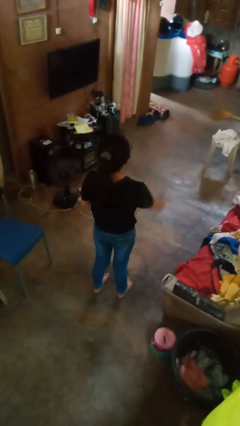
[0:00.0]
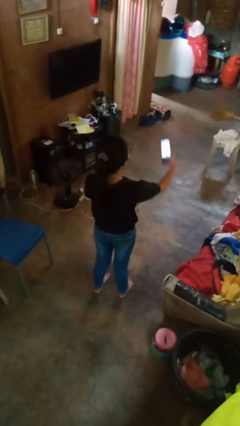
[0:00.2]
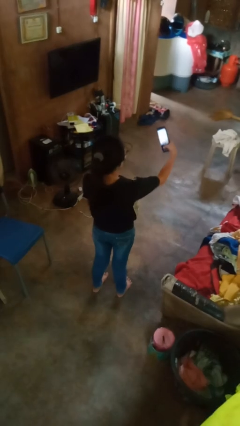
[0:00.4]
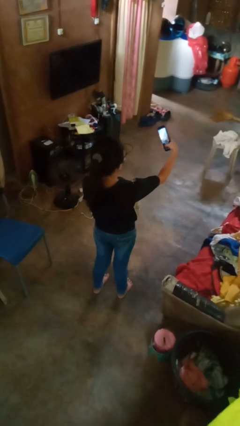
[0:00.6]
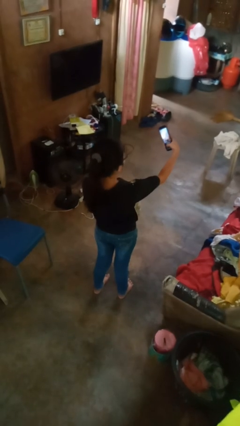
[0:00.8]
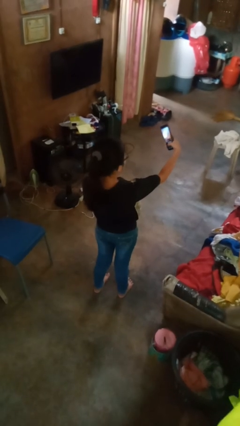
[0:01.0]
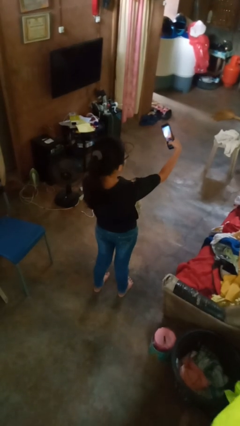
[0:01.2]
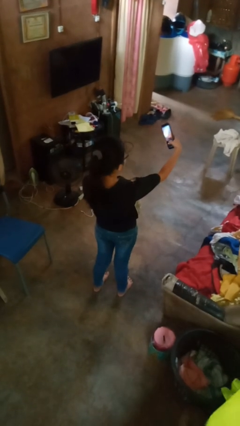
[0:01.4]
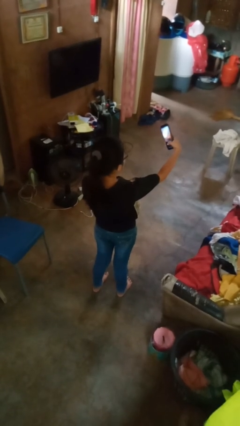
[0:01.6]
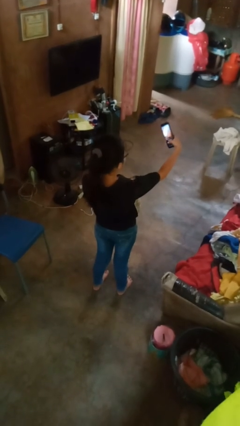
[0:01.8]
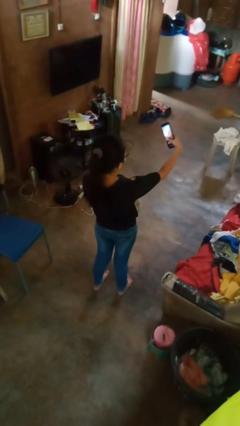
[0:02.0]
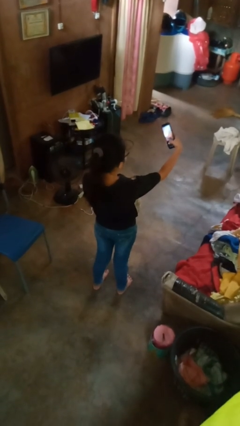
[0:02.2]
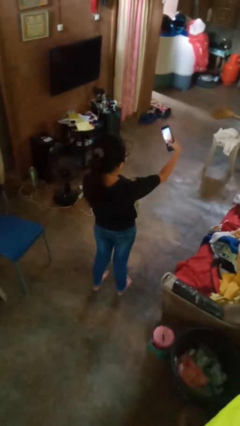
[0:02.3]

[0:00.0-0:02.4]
person takes selfie

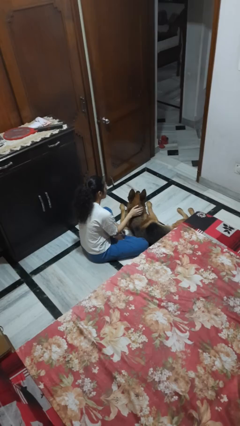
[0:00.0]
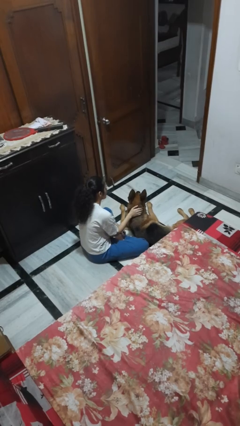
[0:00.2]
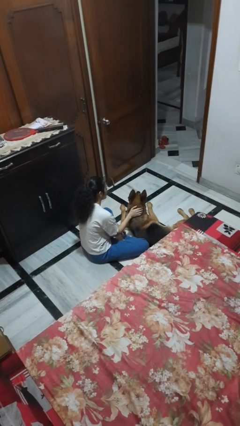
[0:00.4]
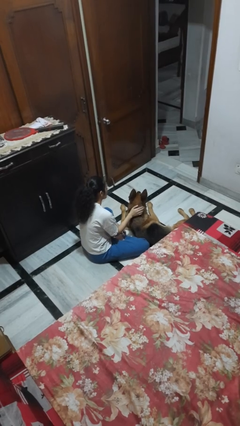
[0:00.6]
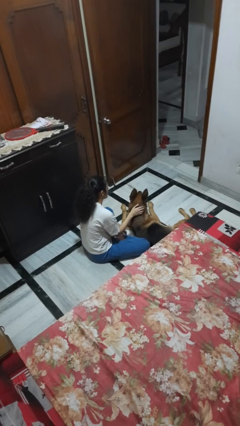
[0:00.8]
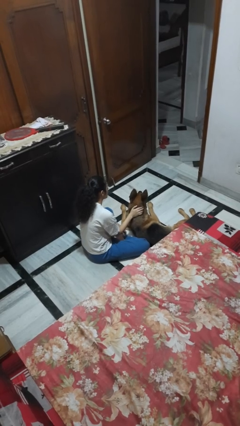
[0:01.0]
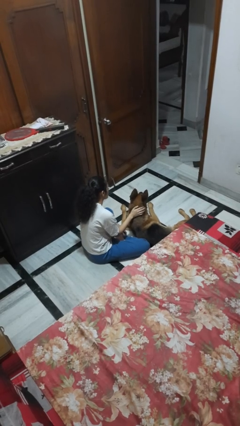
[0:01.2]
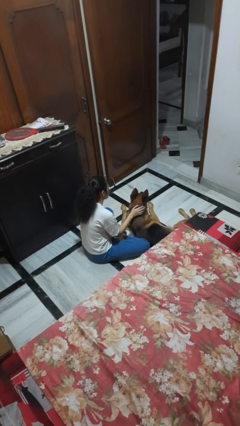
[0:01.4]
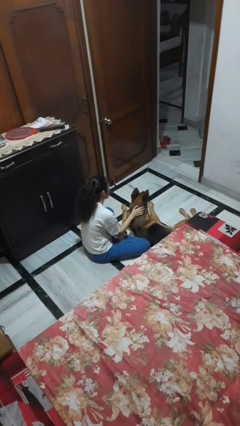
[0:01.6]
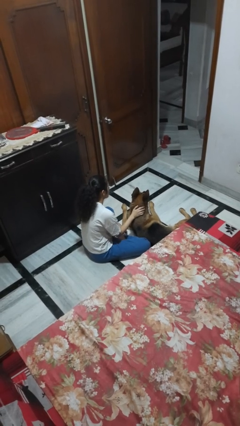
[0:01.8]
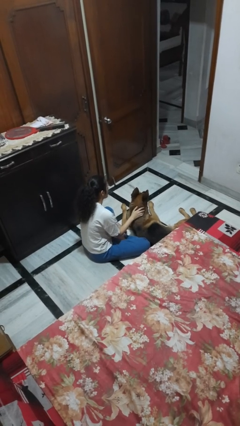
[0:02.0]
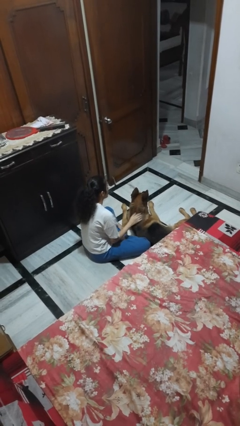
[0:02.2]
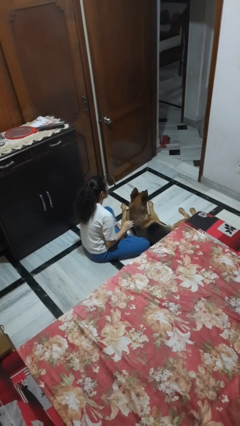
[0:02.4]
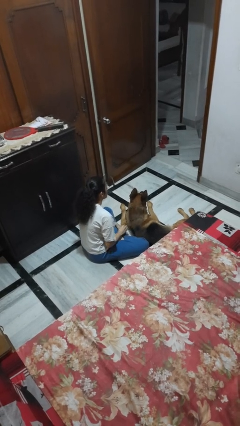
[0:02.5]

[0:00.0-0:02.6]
person pets dog

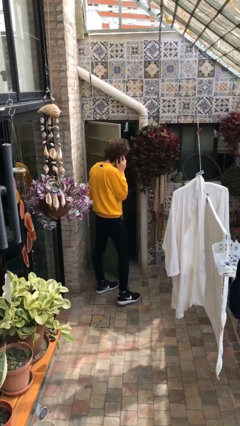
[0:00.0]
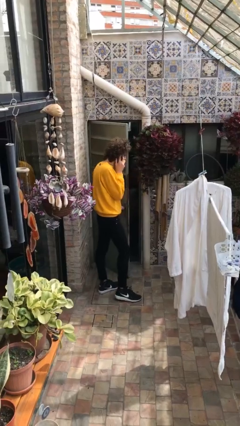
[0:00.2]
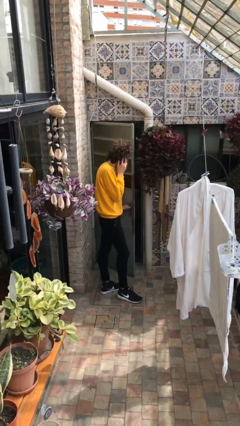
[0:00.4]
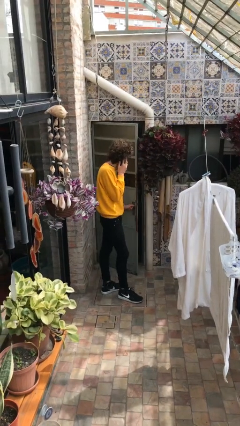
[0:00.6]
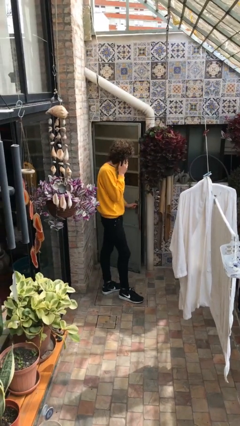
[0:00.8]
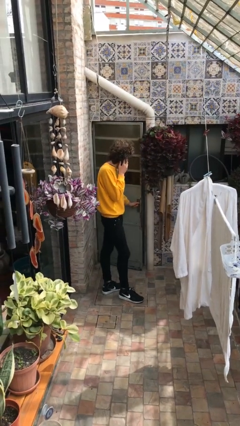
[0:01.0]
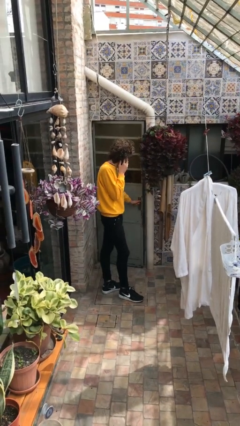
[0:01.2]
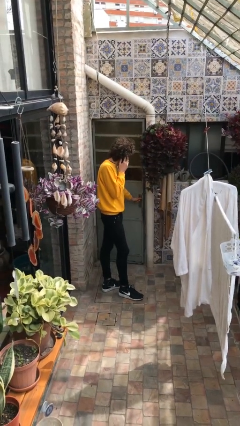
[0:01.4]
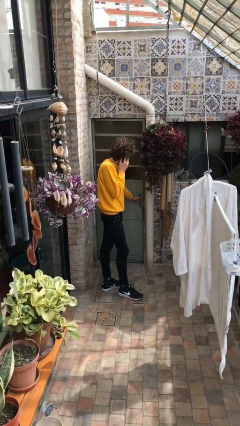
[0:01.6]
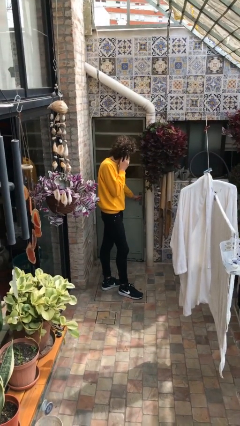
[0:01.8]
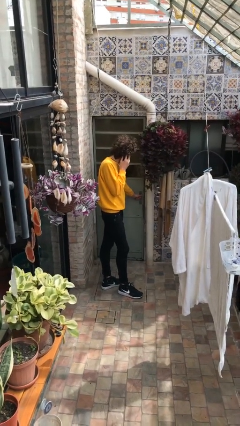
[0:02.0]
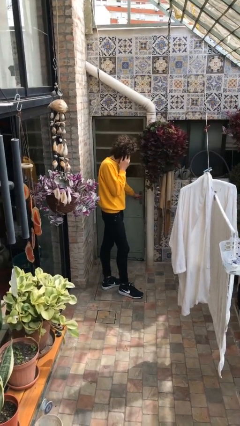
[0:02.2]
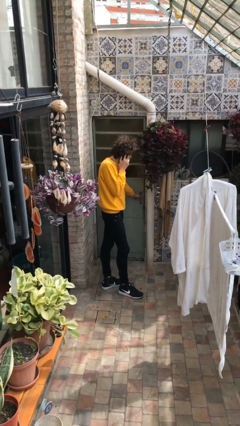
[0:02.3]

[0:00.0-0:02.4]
person closes facility door

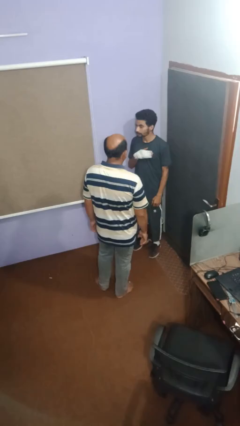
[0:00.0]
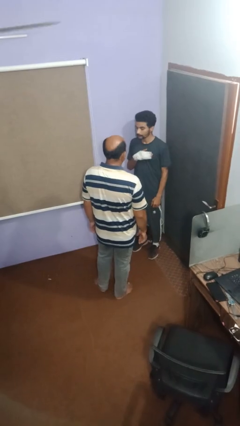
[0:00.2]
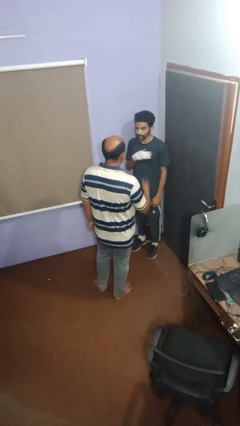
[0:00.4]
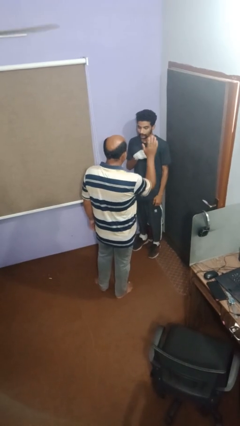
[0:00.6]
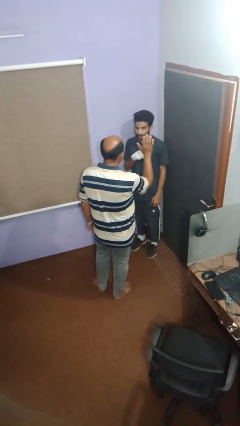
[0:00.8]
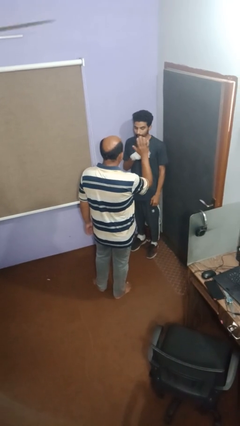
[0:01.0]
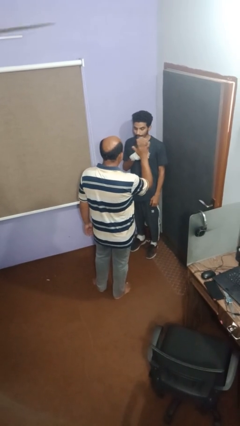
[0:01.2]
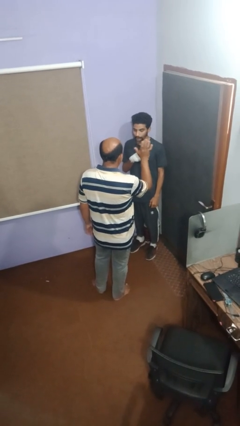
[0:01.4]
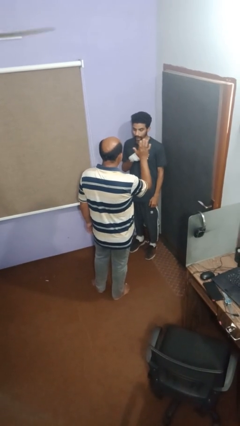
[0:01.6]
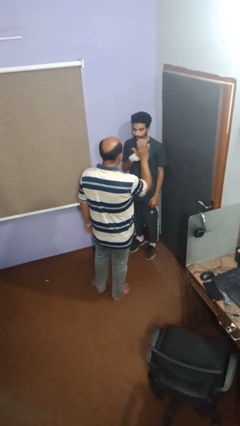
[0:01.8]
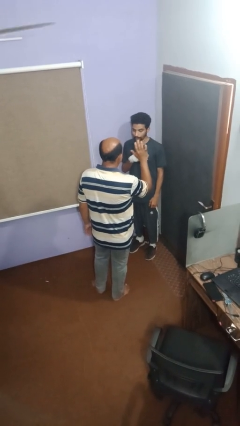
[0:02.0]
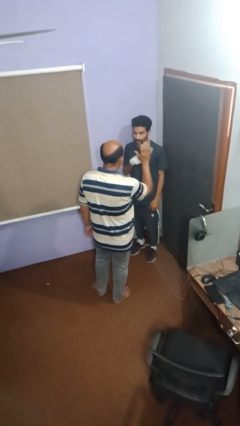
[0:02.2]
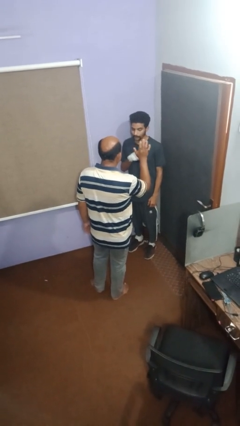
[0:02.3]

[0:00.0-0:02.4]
person waves at person

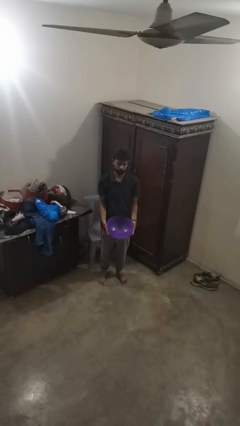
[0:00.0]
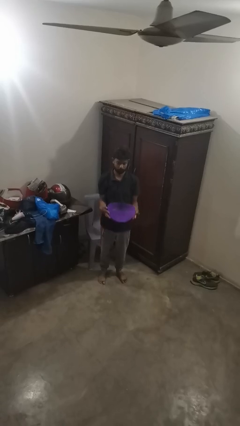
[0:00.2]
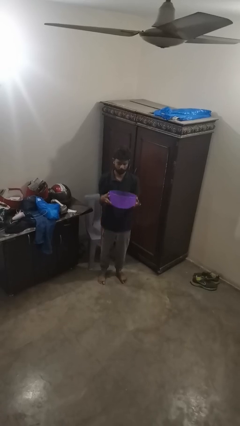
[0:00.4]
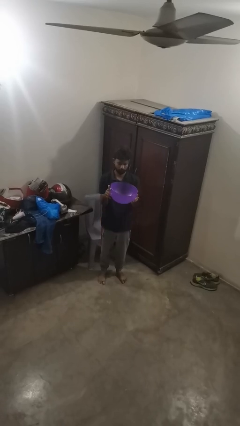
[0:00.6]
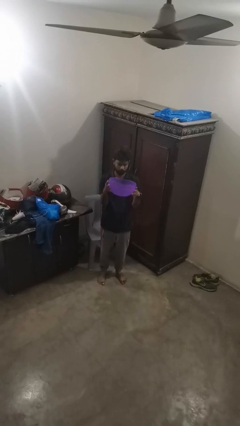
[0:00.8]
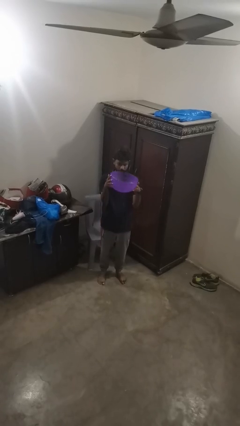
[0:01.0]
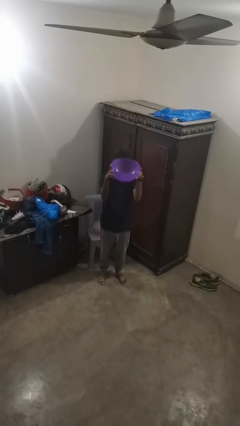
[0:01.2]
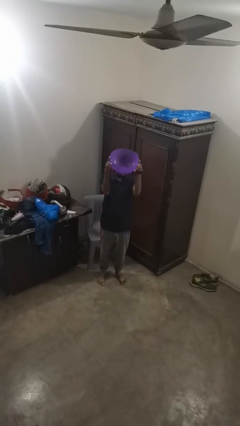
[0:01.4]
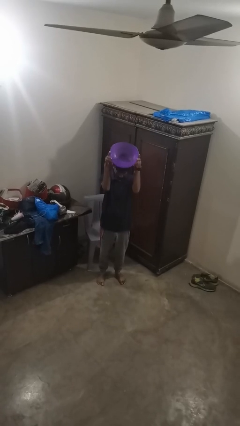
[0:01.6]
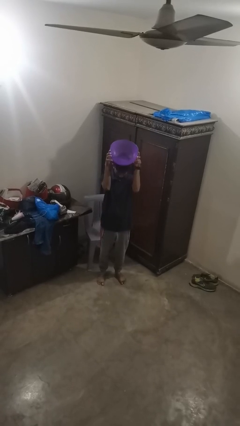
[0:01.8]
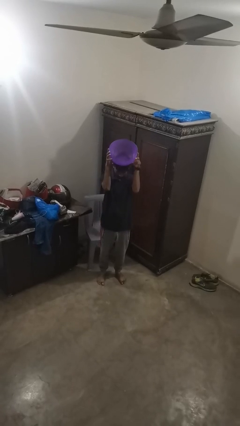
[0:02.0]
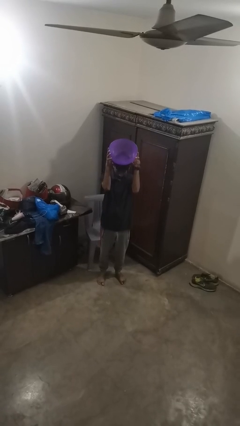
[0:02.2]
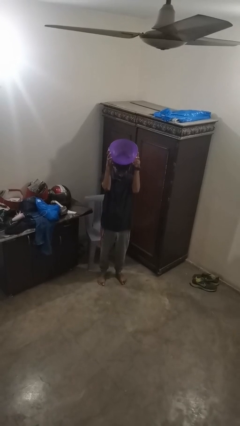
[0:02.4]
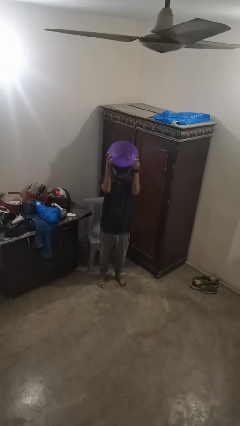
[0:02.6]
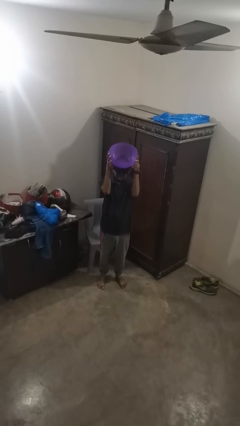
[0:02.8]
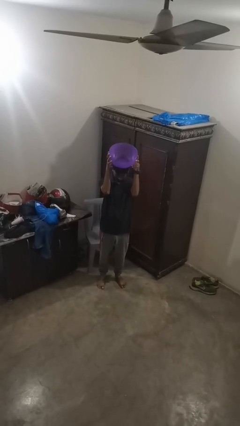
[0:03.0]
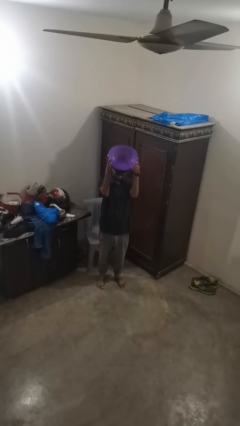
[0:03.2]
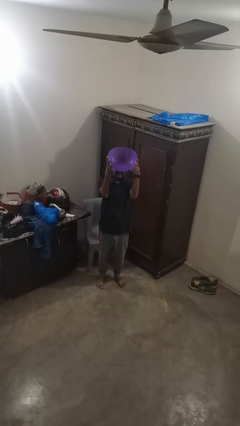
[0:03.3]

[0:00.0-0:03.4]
person holds object above head

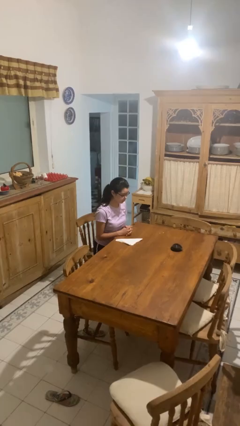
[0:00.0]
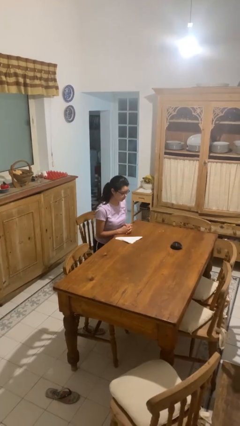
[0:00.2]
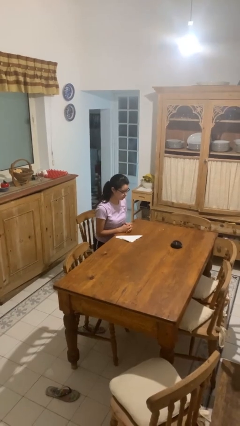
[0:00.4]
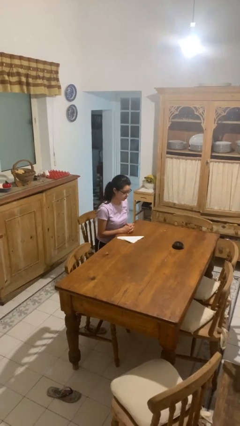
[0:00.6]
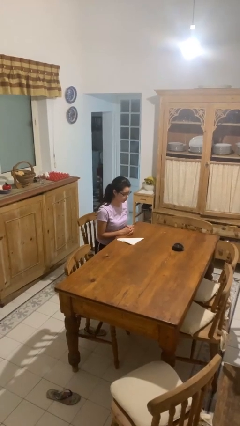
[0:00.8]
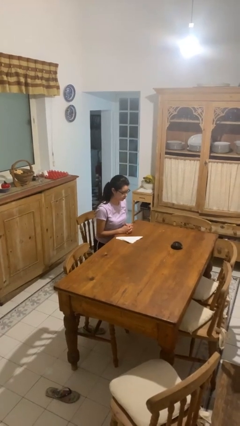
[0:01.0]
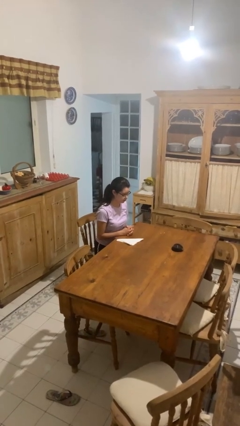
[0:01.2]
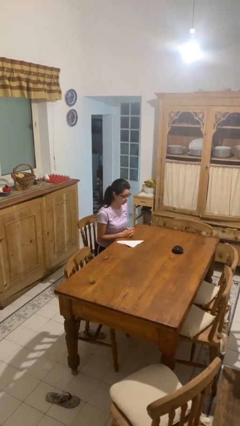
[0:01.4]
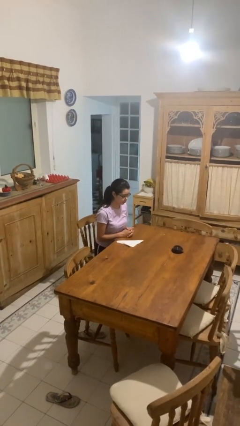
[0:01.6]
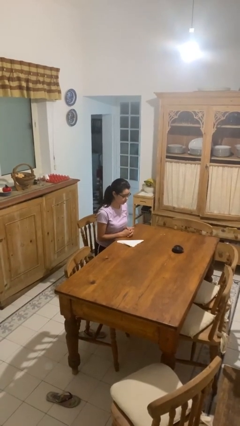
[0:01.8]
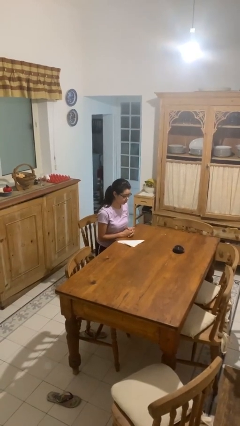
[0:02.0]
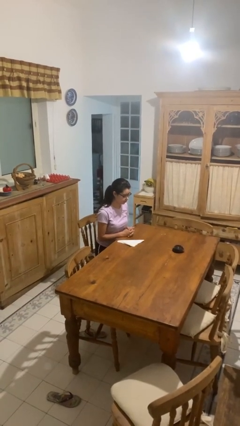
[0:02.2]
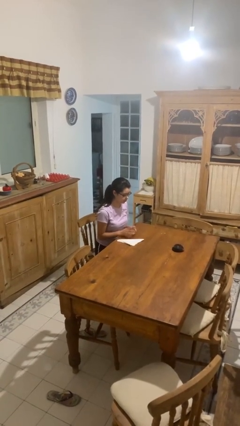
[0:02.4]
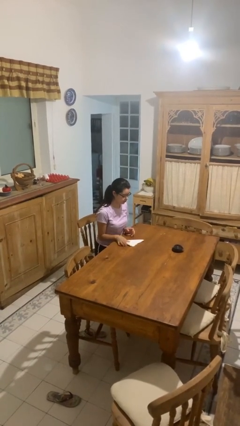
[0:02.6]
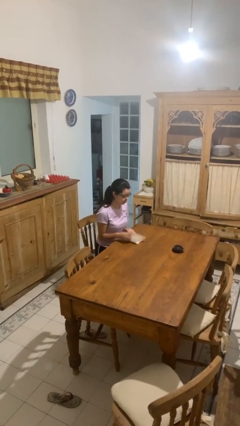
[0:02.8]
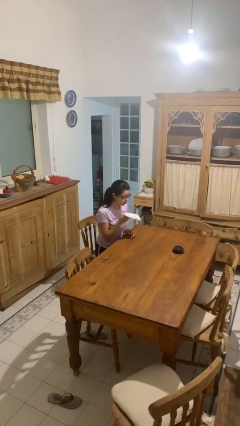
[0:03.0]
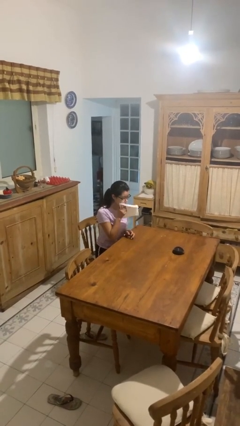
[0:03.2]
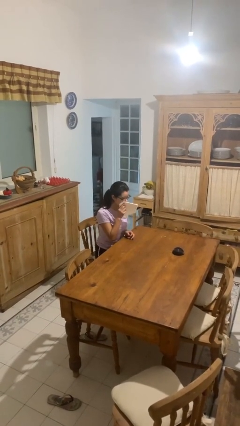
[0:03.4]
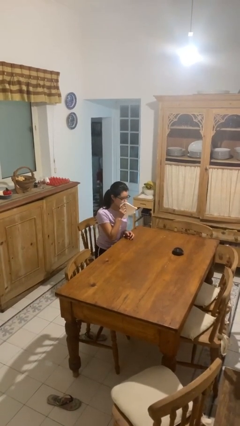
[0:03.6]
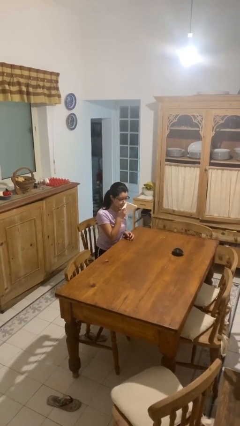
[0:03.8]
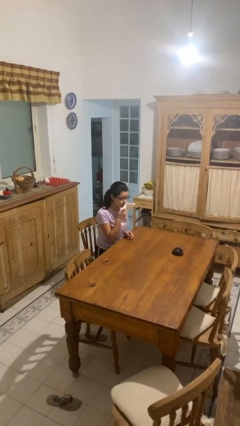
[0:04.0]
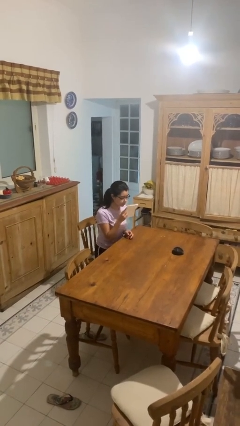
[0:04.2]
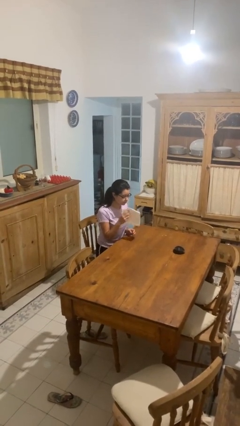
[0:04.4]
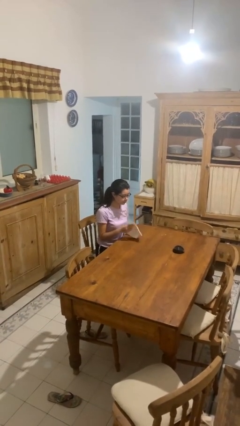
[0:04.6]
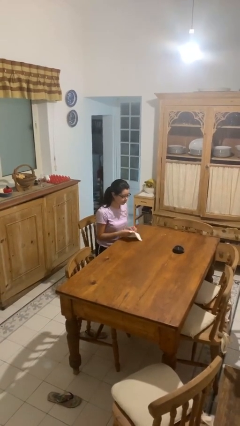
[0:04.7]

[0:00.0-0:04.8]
person wipes mouth with napkin
